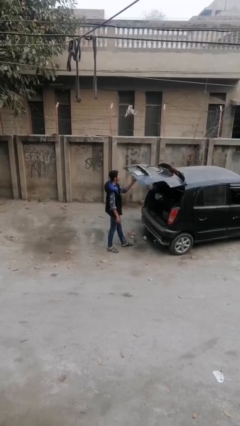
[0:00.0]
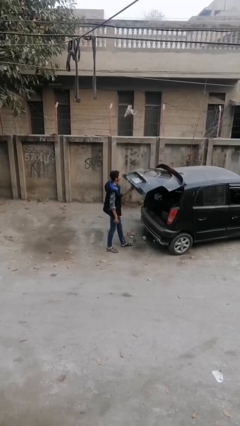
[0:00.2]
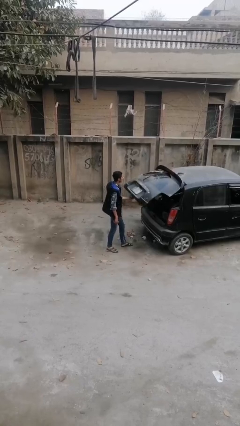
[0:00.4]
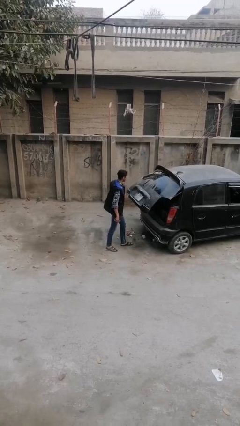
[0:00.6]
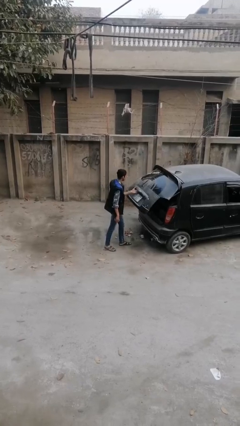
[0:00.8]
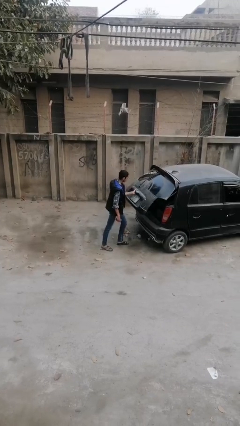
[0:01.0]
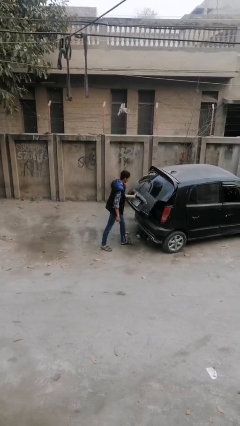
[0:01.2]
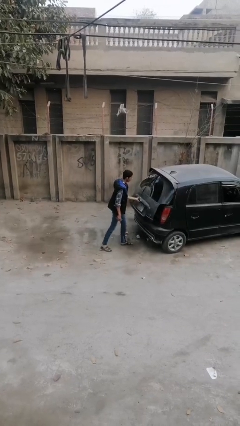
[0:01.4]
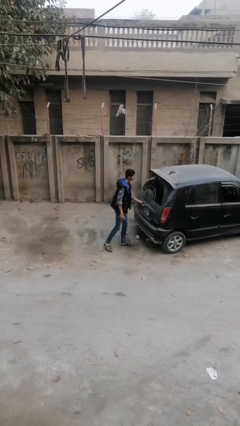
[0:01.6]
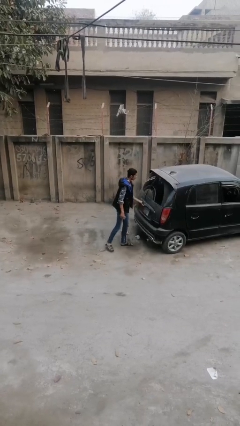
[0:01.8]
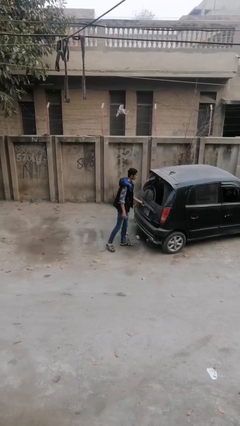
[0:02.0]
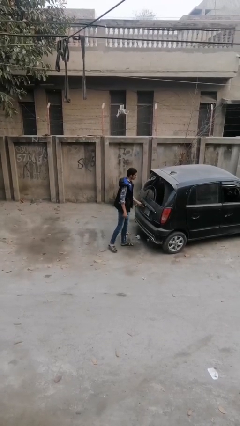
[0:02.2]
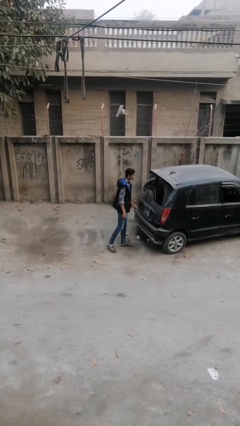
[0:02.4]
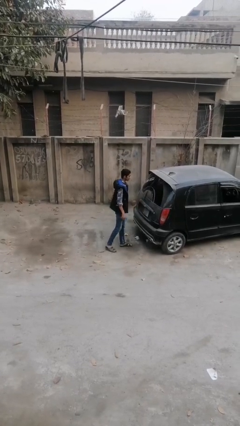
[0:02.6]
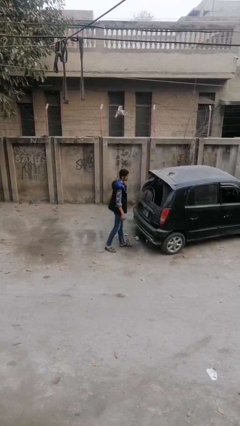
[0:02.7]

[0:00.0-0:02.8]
person closes car trunk

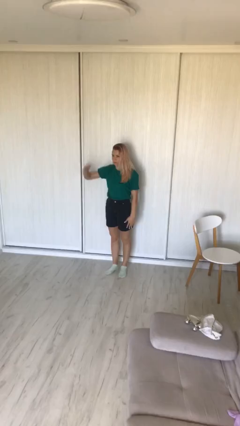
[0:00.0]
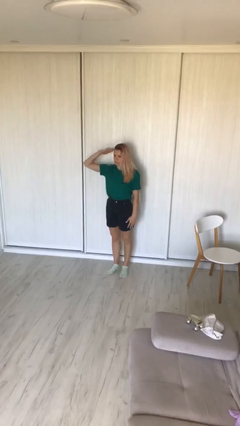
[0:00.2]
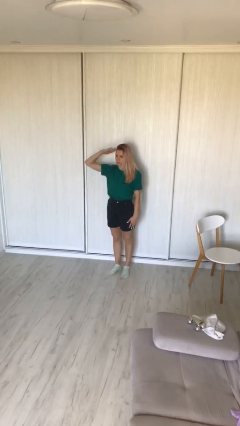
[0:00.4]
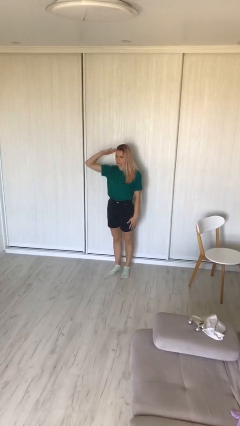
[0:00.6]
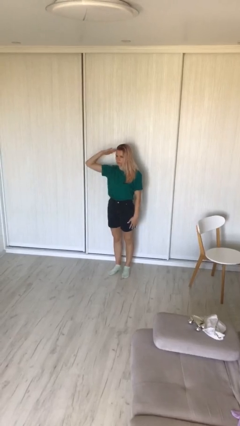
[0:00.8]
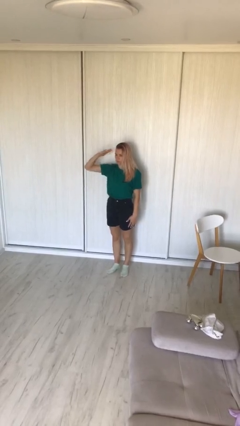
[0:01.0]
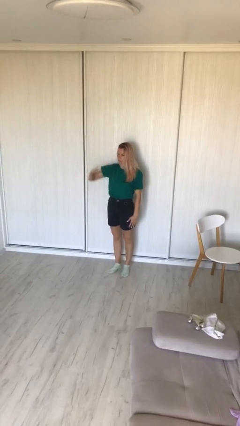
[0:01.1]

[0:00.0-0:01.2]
person salutes

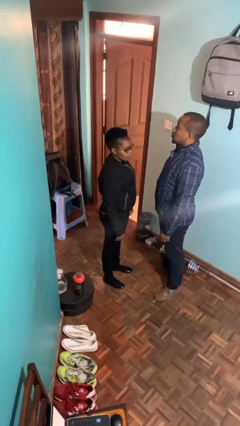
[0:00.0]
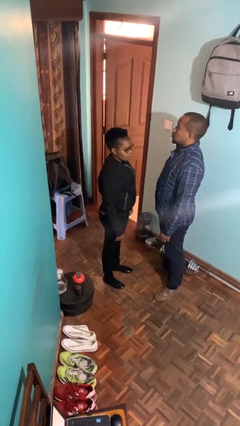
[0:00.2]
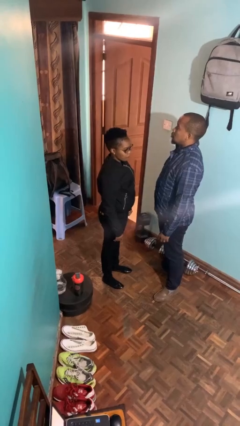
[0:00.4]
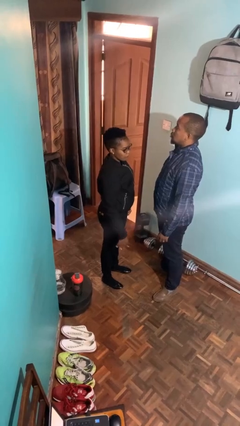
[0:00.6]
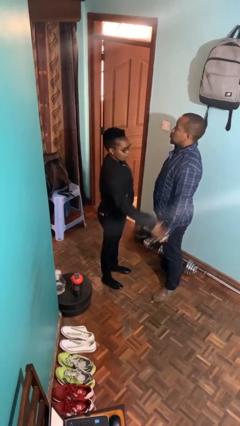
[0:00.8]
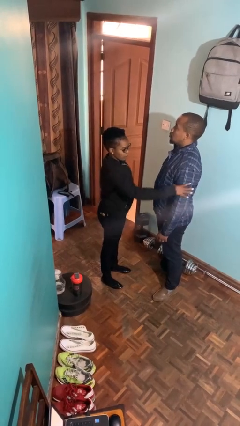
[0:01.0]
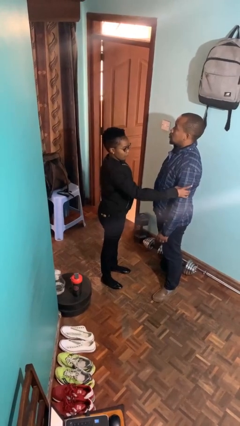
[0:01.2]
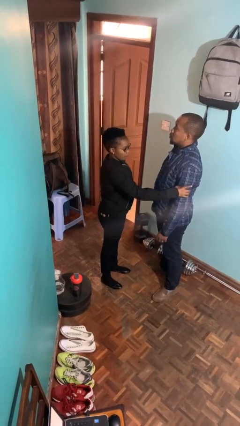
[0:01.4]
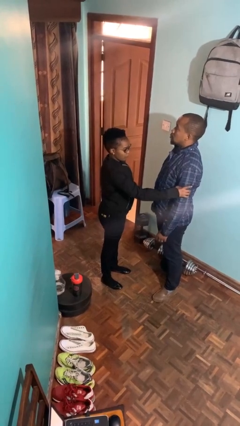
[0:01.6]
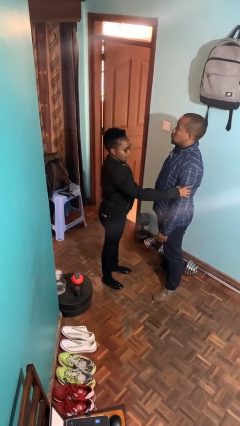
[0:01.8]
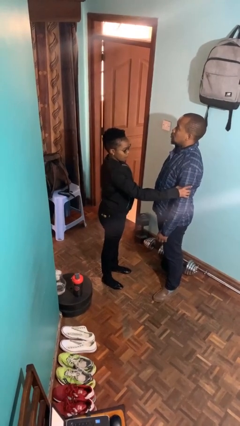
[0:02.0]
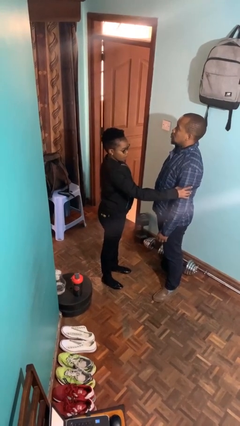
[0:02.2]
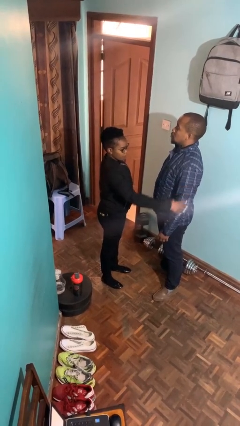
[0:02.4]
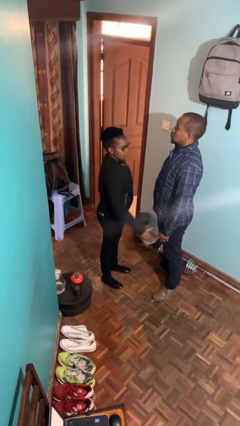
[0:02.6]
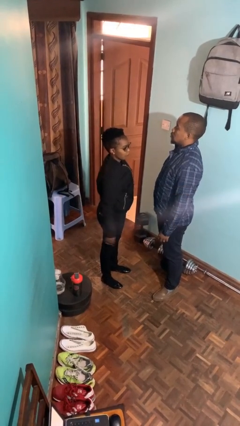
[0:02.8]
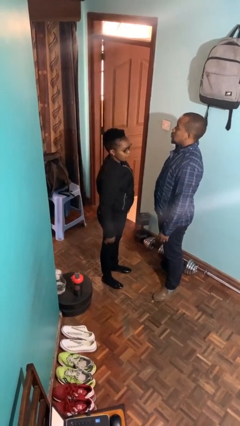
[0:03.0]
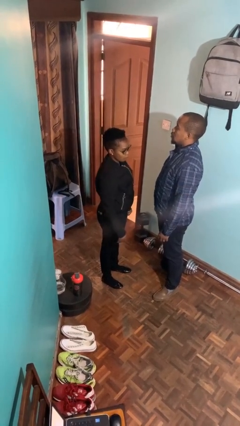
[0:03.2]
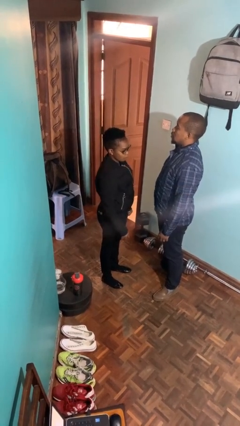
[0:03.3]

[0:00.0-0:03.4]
person grabs person by bicep

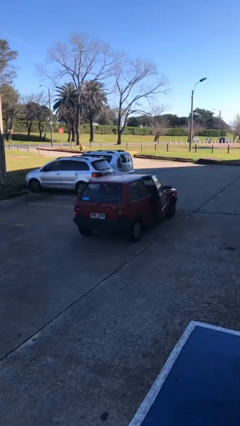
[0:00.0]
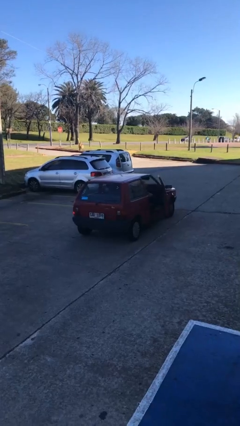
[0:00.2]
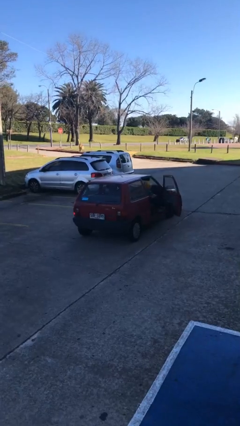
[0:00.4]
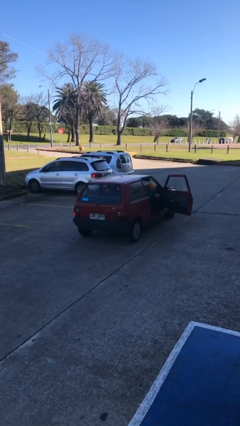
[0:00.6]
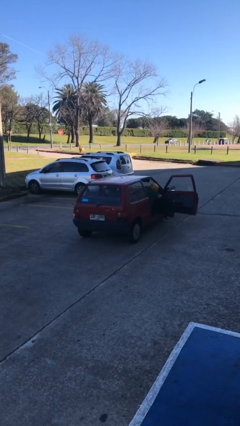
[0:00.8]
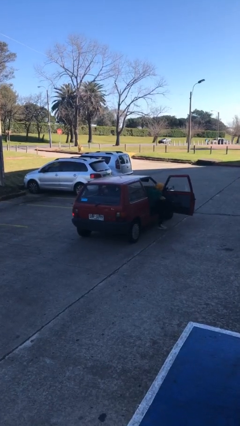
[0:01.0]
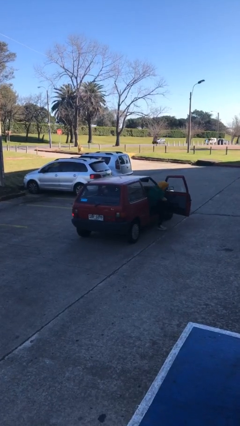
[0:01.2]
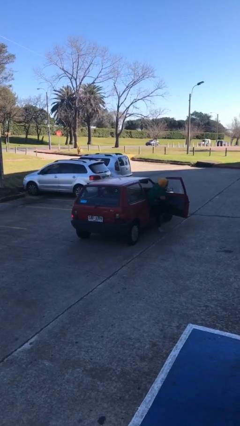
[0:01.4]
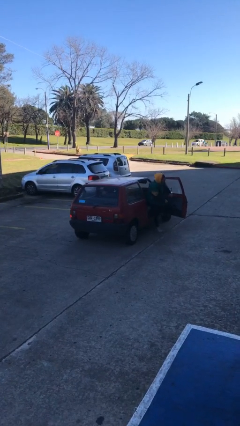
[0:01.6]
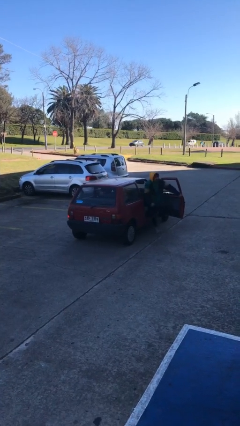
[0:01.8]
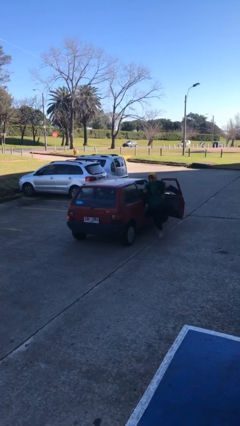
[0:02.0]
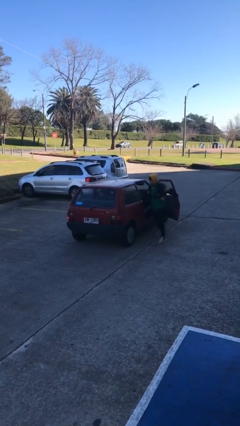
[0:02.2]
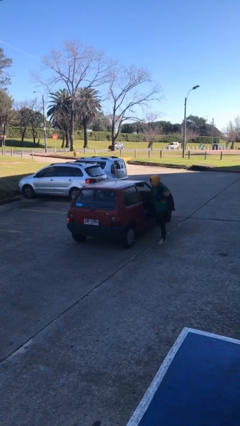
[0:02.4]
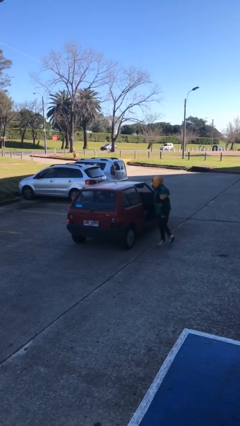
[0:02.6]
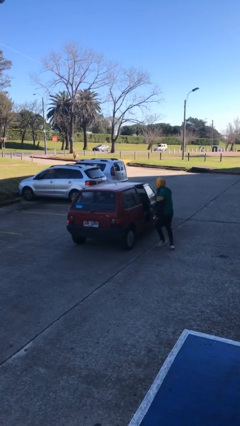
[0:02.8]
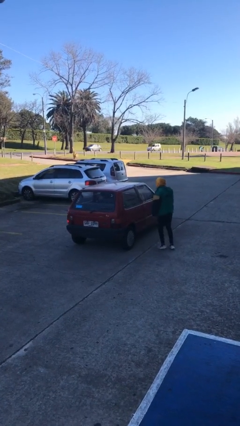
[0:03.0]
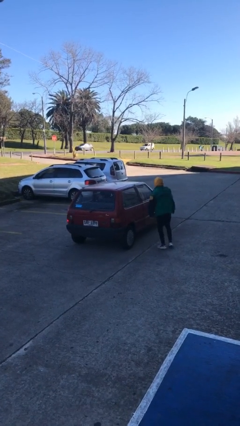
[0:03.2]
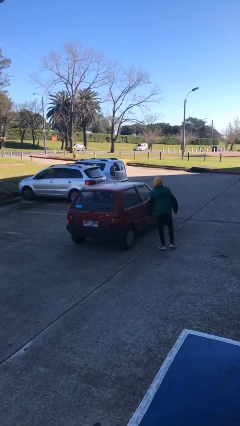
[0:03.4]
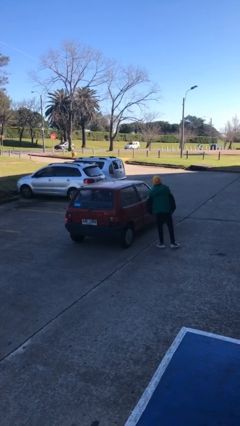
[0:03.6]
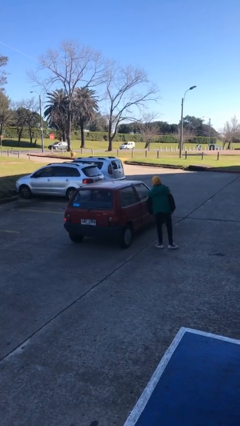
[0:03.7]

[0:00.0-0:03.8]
car drops off person

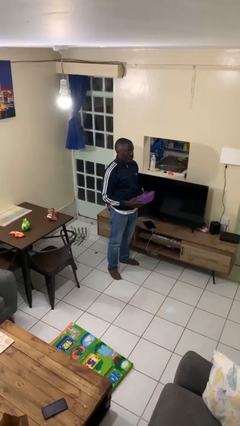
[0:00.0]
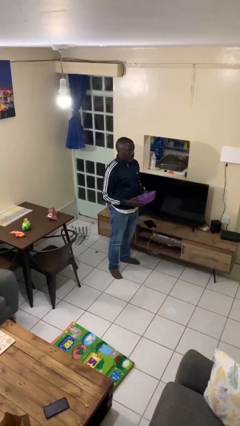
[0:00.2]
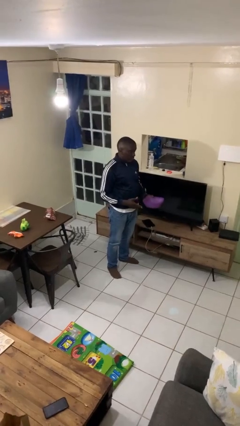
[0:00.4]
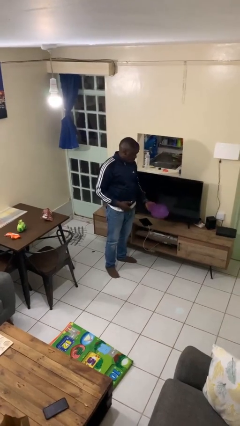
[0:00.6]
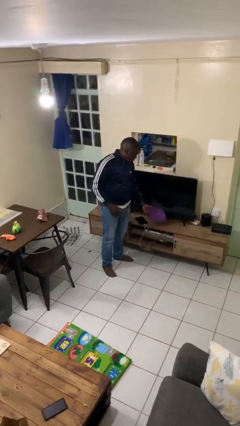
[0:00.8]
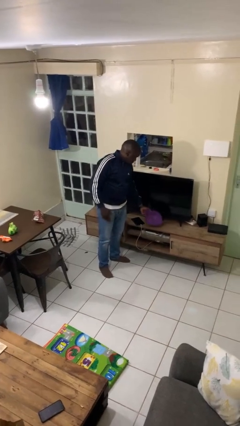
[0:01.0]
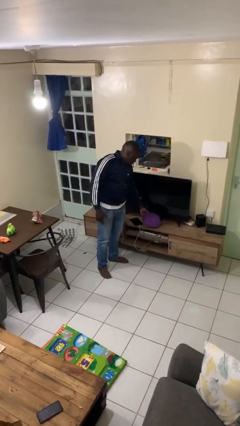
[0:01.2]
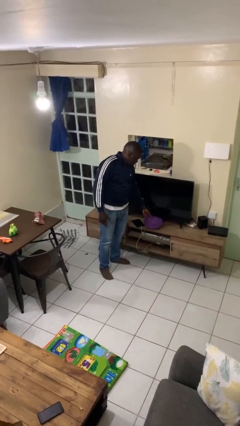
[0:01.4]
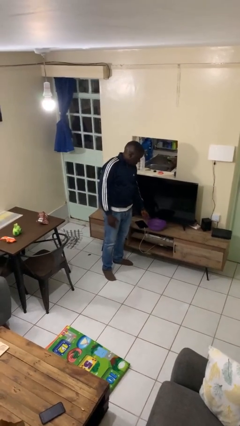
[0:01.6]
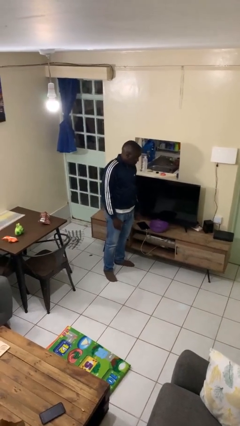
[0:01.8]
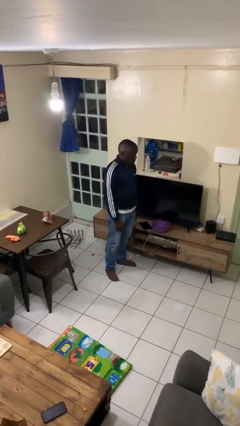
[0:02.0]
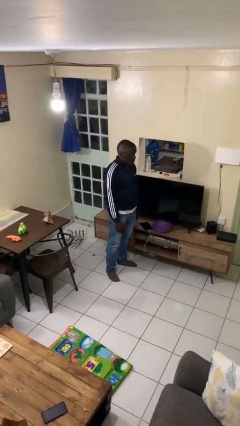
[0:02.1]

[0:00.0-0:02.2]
person puts down object on countertop

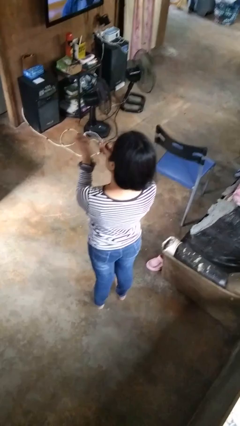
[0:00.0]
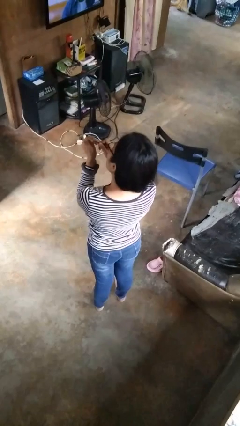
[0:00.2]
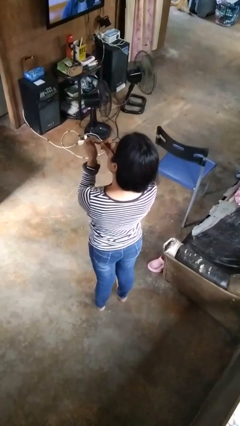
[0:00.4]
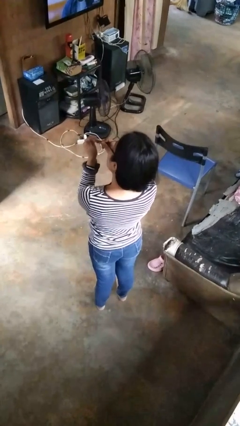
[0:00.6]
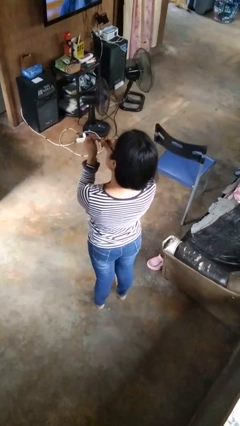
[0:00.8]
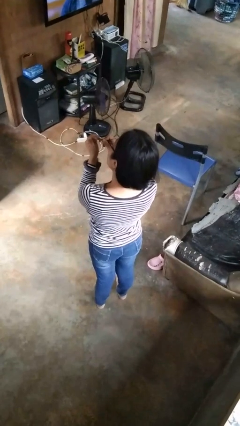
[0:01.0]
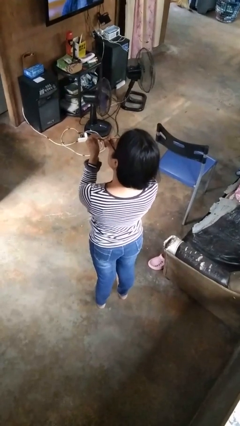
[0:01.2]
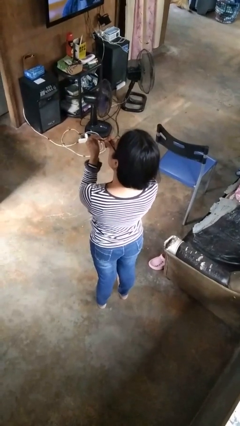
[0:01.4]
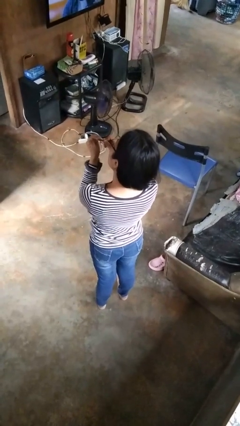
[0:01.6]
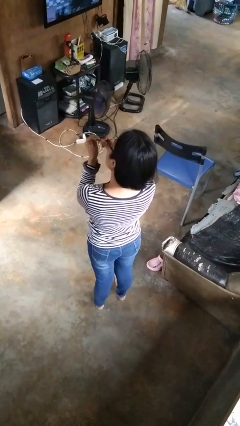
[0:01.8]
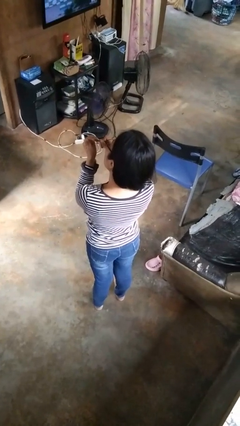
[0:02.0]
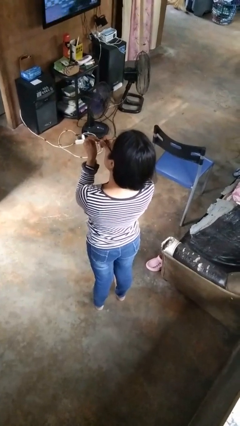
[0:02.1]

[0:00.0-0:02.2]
person files fingernails

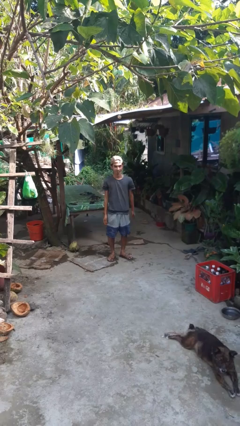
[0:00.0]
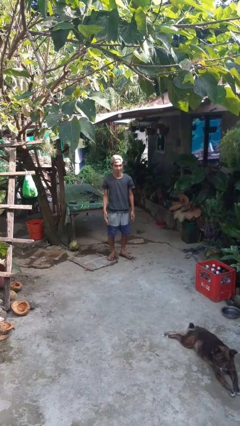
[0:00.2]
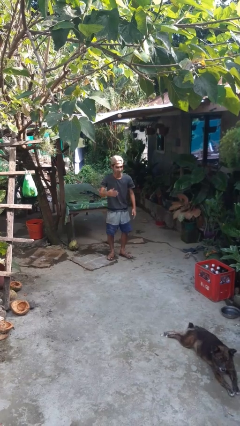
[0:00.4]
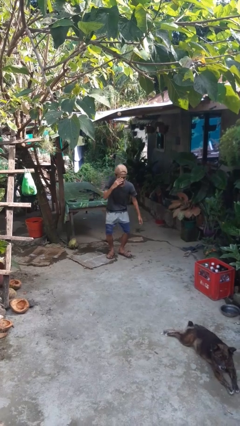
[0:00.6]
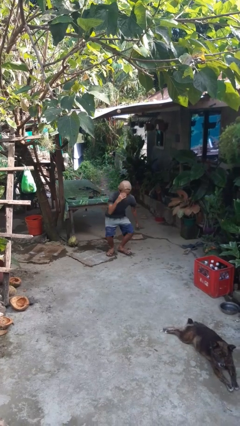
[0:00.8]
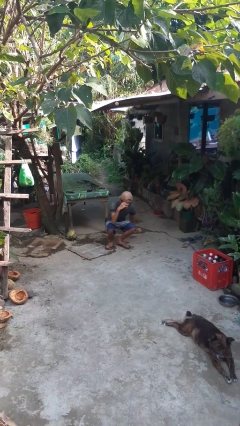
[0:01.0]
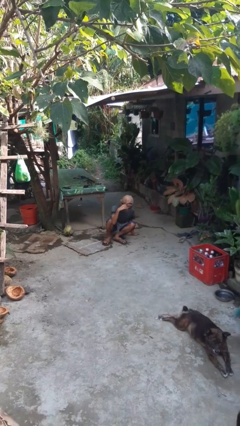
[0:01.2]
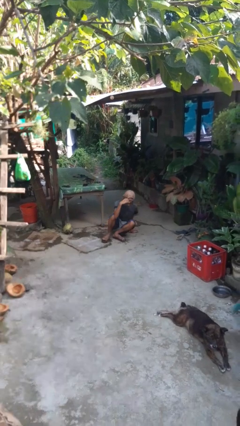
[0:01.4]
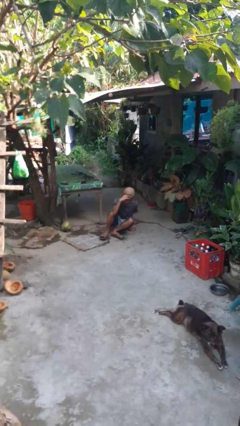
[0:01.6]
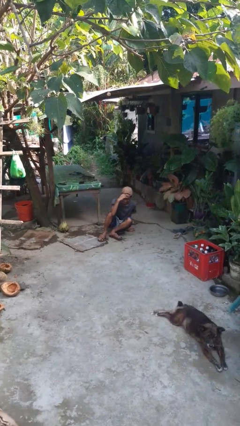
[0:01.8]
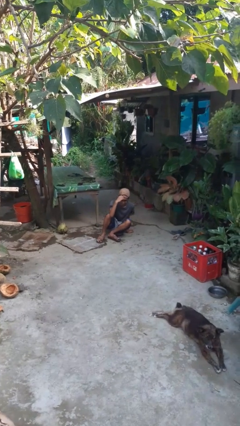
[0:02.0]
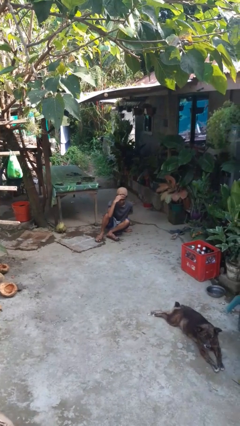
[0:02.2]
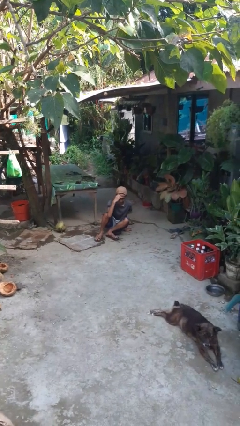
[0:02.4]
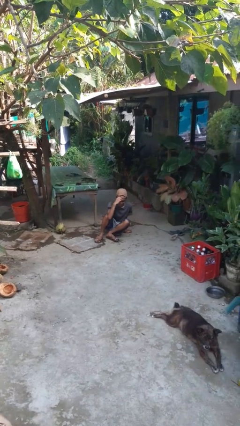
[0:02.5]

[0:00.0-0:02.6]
person falls while standing
